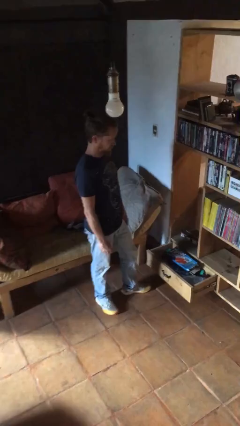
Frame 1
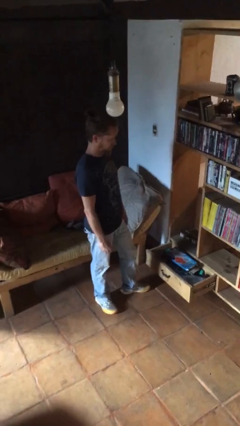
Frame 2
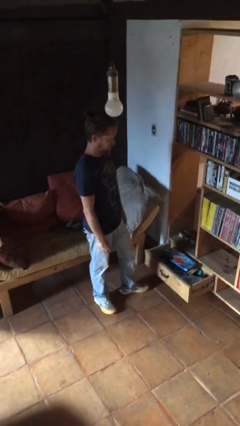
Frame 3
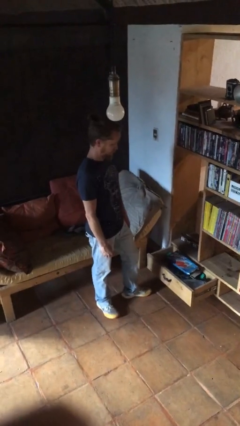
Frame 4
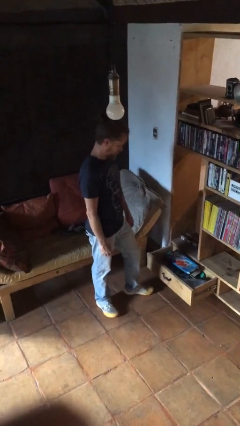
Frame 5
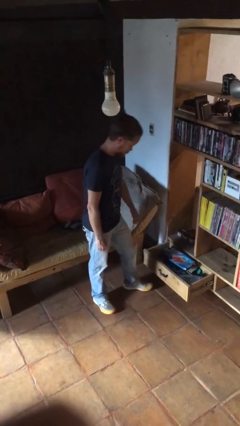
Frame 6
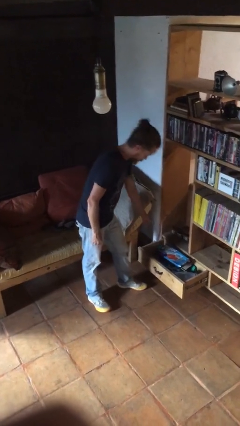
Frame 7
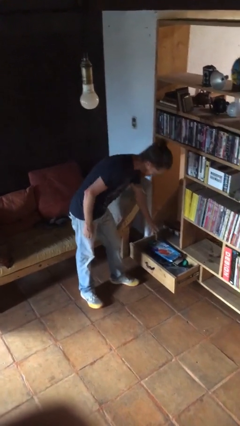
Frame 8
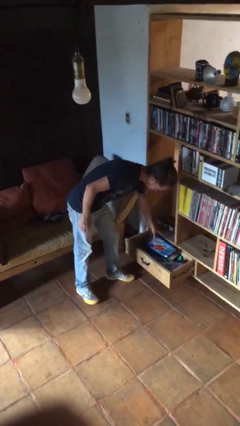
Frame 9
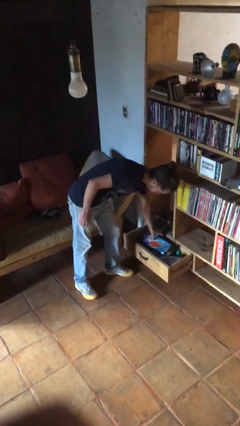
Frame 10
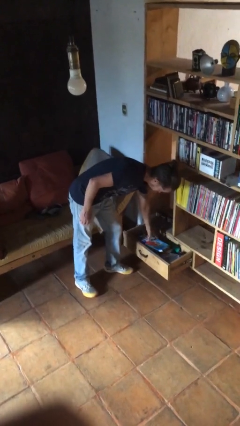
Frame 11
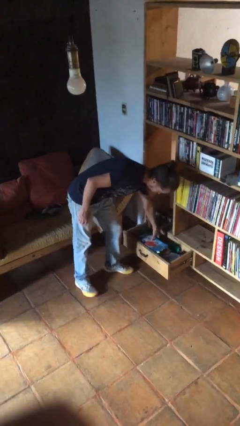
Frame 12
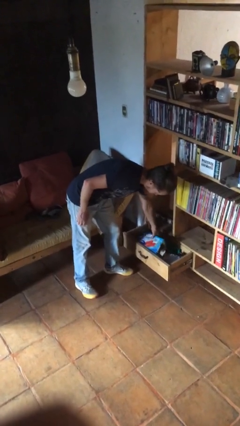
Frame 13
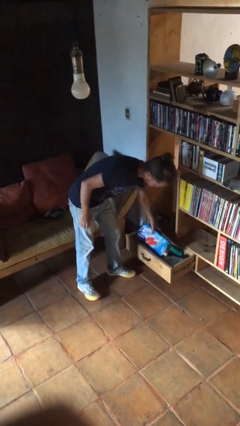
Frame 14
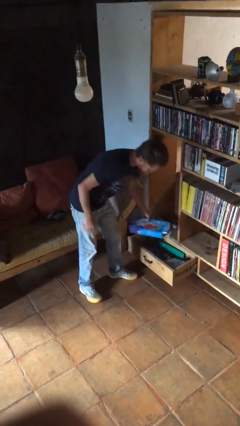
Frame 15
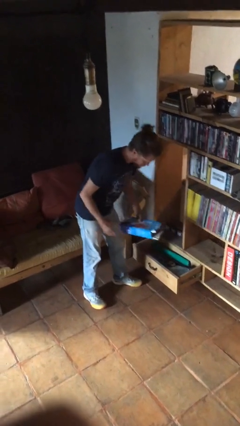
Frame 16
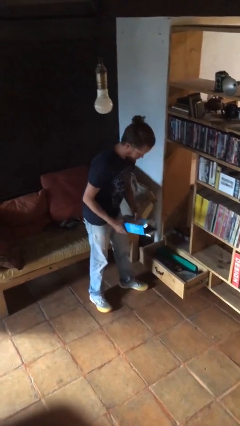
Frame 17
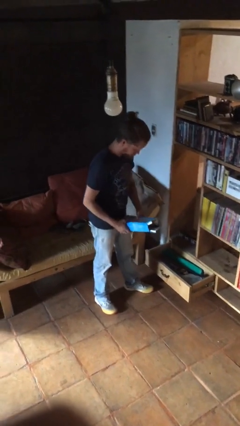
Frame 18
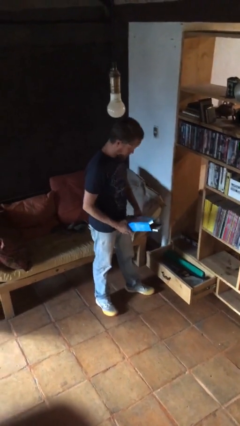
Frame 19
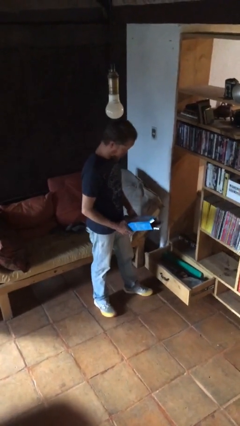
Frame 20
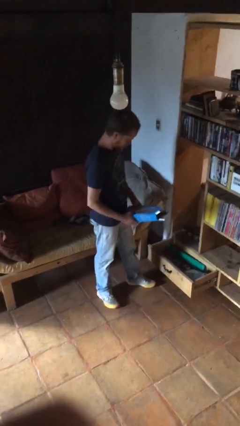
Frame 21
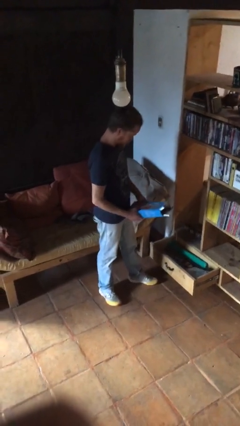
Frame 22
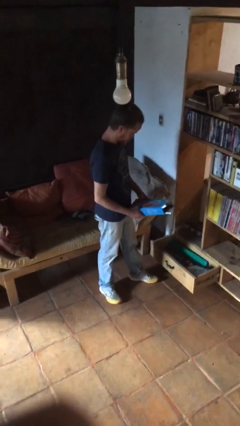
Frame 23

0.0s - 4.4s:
person picks up object from cabinet

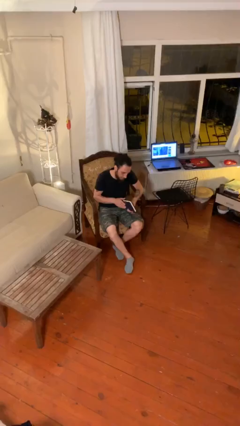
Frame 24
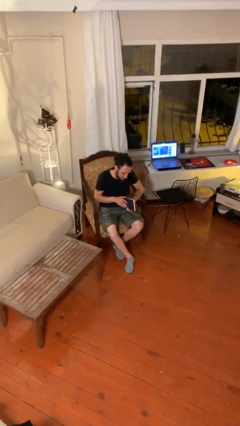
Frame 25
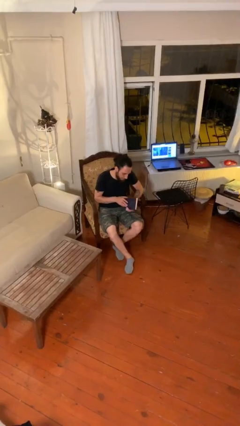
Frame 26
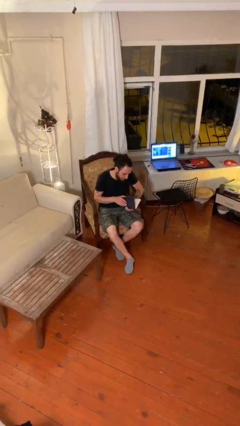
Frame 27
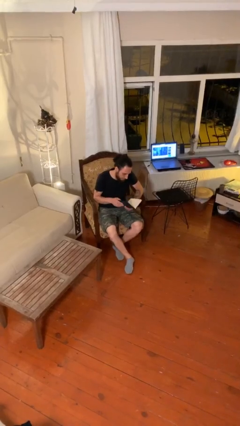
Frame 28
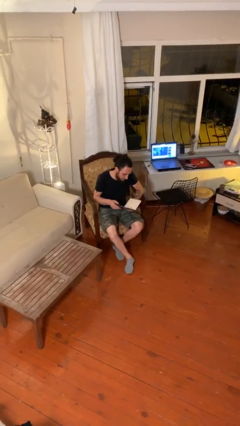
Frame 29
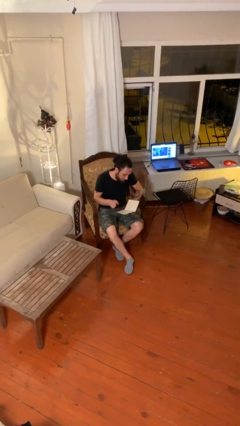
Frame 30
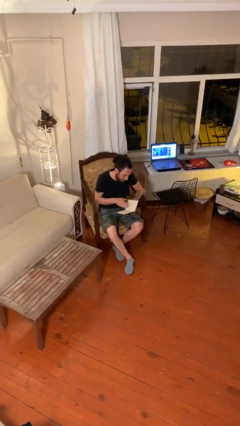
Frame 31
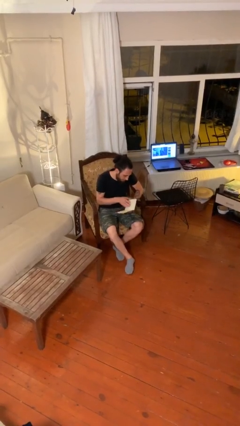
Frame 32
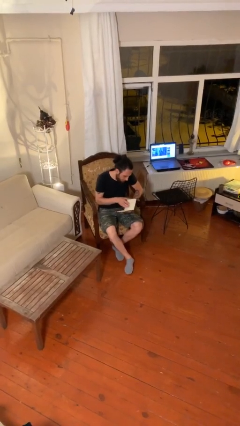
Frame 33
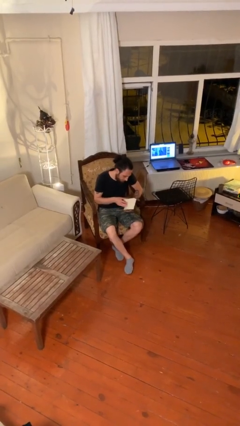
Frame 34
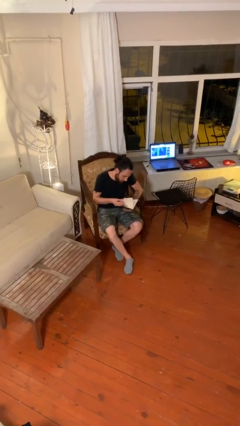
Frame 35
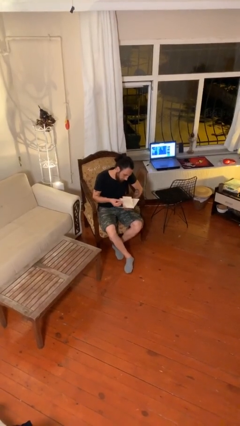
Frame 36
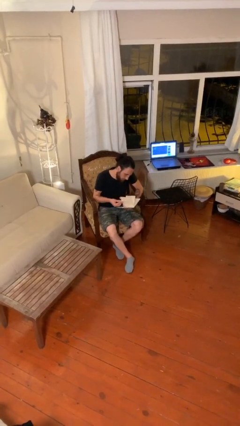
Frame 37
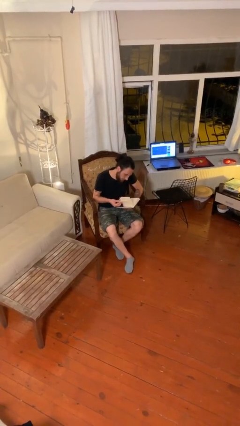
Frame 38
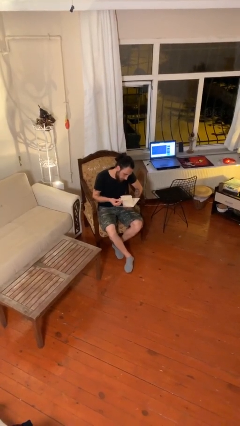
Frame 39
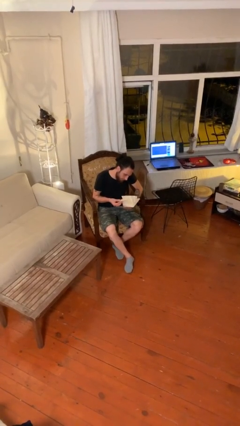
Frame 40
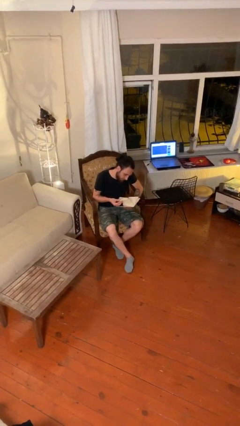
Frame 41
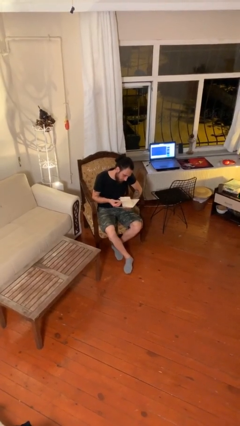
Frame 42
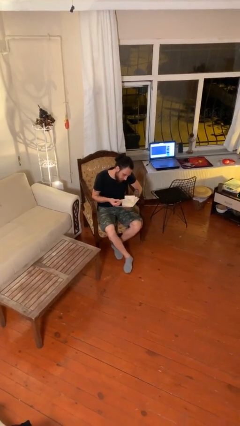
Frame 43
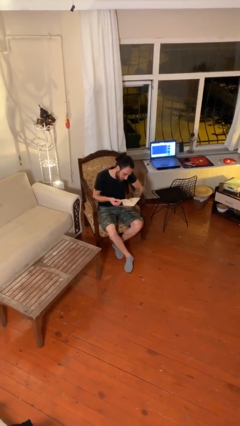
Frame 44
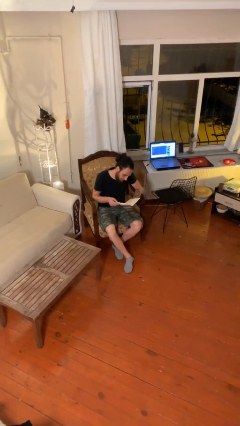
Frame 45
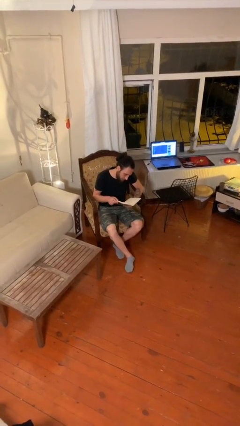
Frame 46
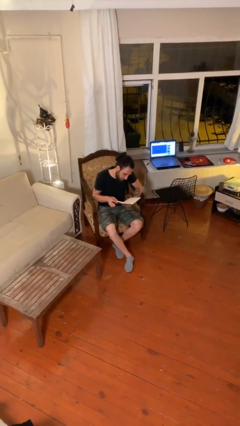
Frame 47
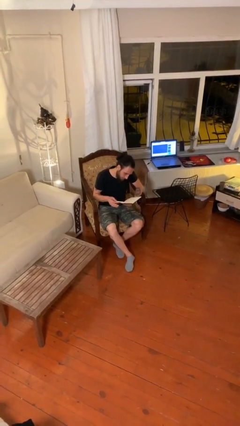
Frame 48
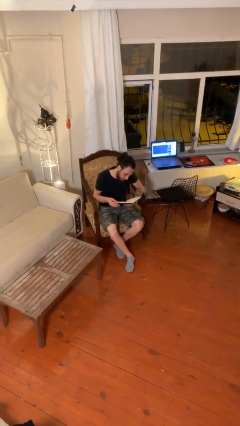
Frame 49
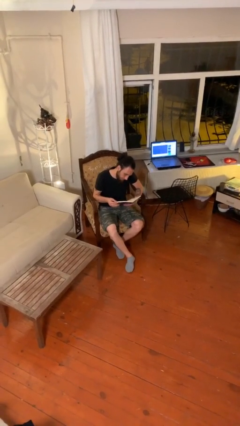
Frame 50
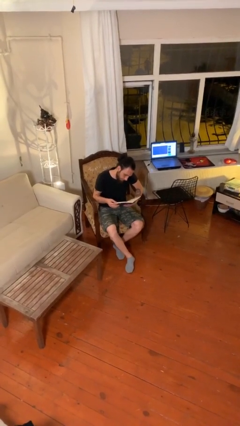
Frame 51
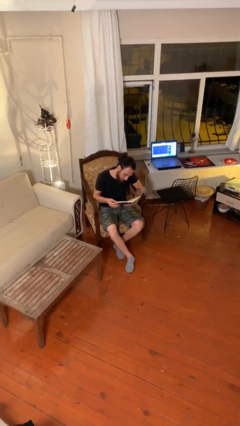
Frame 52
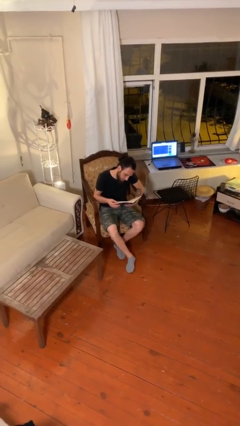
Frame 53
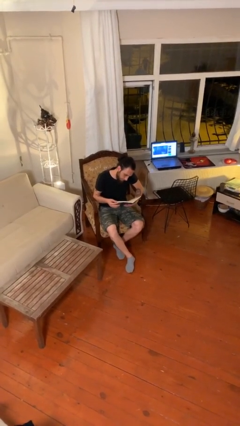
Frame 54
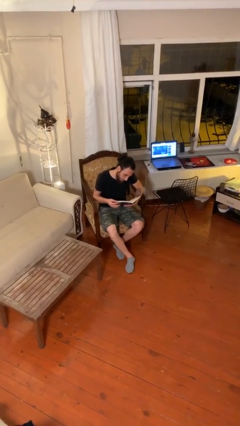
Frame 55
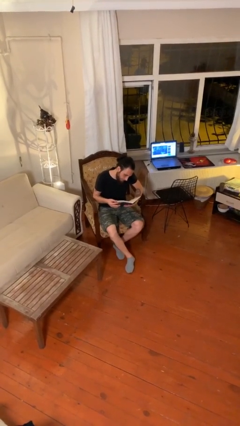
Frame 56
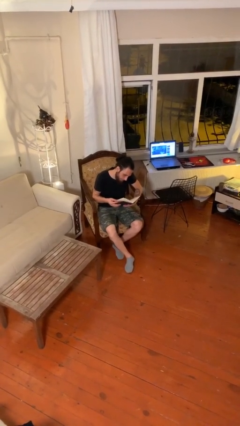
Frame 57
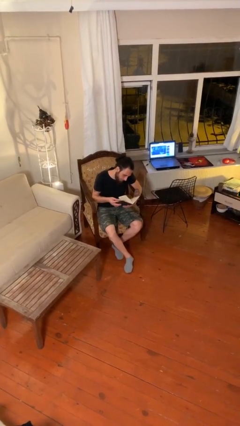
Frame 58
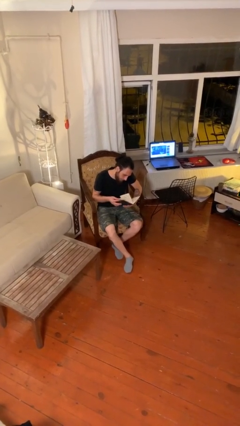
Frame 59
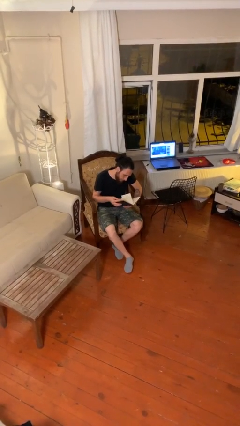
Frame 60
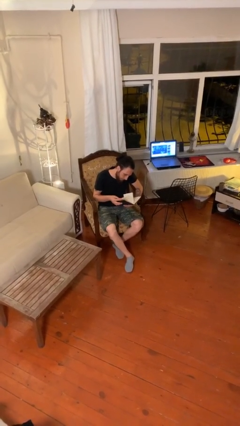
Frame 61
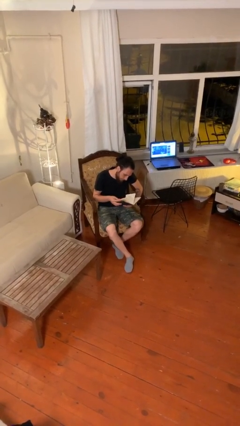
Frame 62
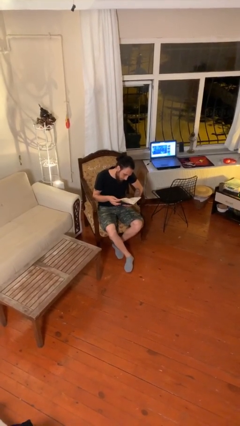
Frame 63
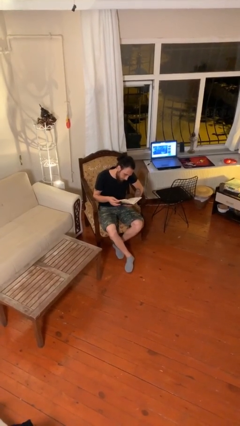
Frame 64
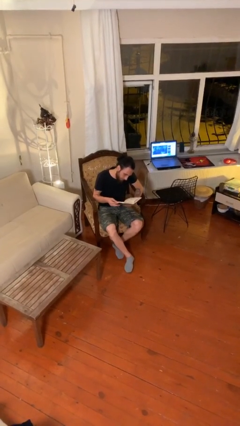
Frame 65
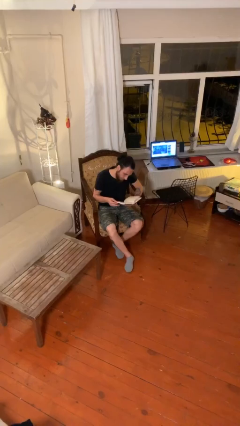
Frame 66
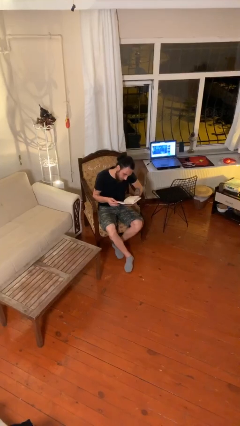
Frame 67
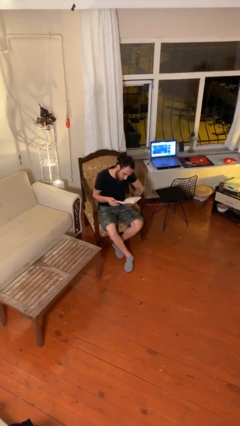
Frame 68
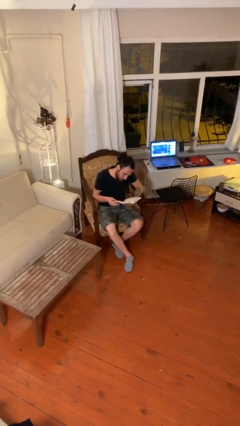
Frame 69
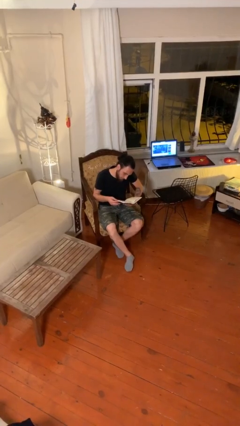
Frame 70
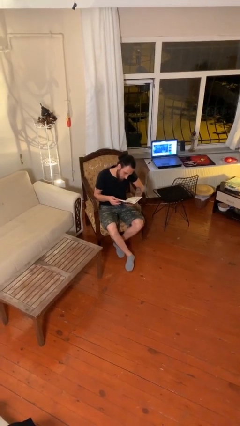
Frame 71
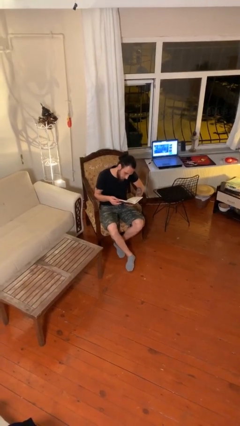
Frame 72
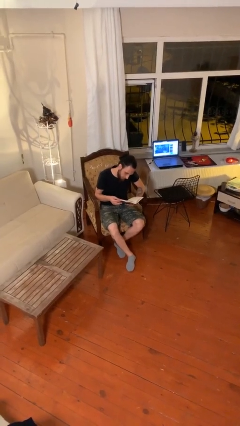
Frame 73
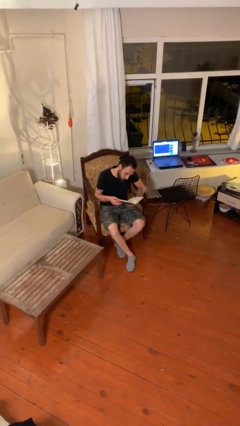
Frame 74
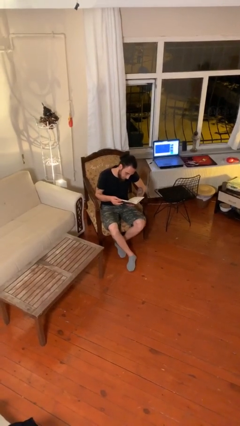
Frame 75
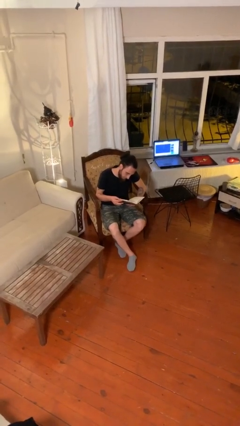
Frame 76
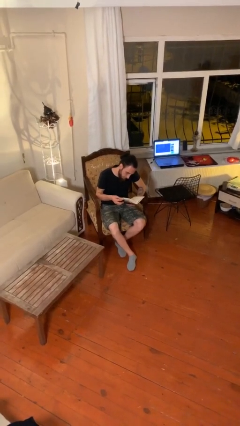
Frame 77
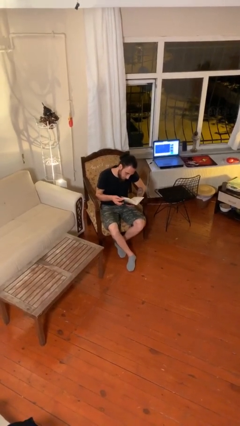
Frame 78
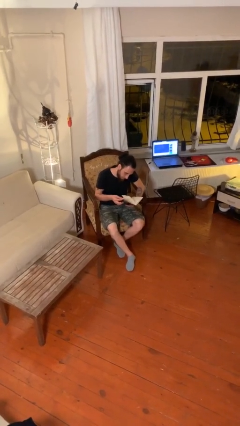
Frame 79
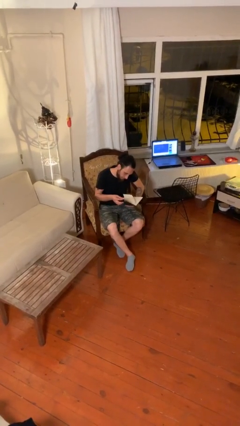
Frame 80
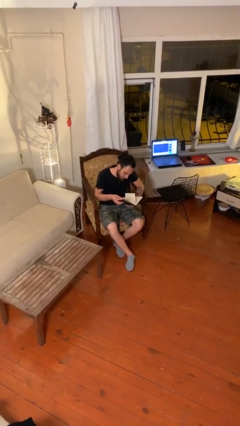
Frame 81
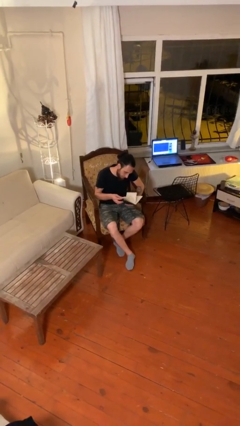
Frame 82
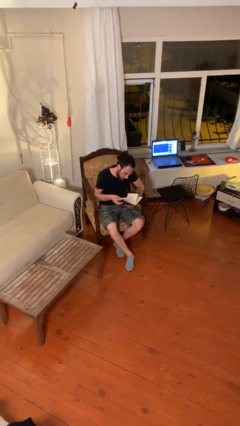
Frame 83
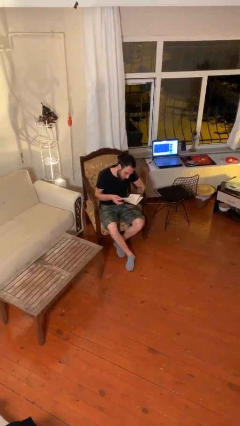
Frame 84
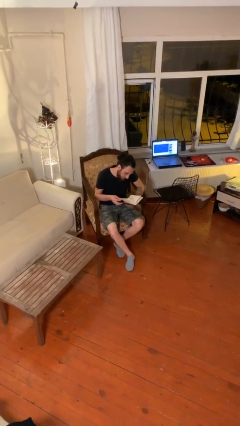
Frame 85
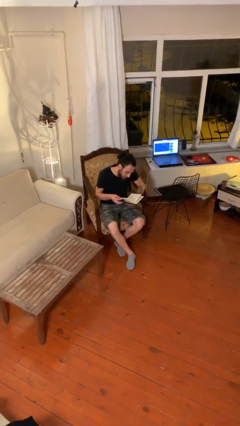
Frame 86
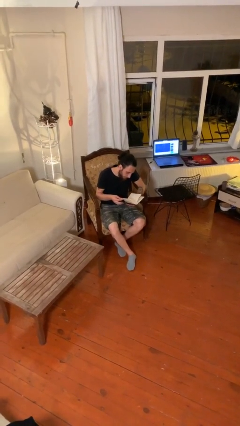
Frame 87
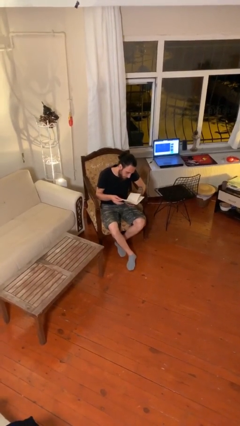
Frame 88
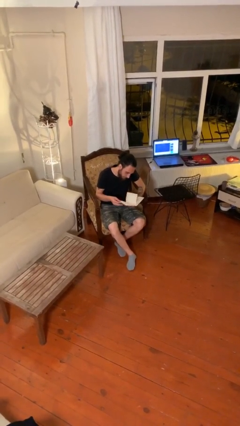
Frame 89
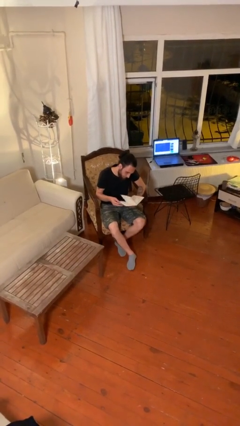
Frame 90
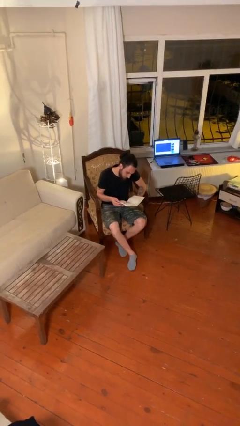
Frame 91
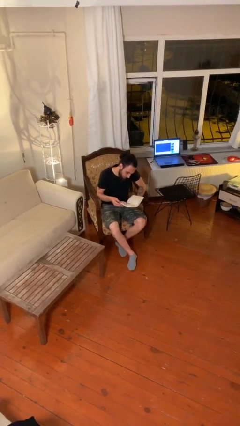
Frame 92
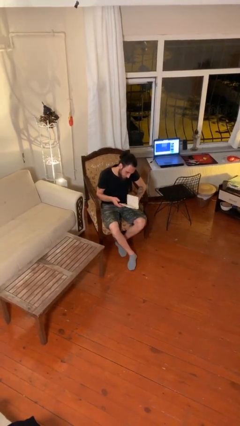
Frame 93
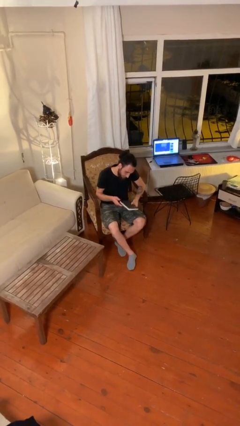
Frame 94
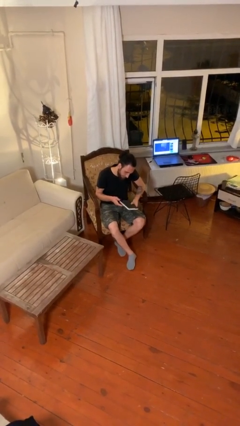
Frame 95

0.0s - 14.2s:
person reads document
